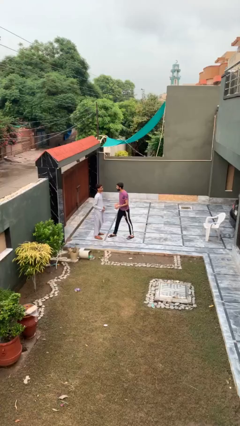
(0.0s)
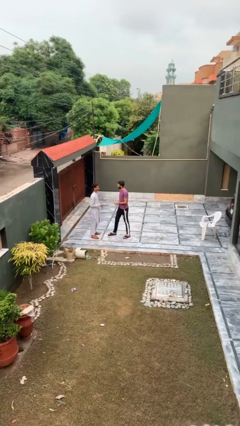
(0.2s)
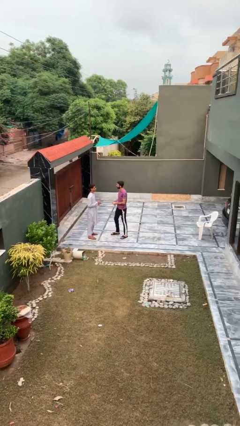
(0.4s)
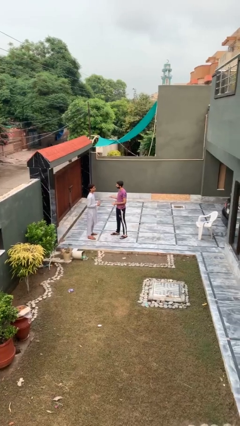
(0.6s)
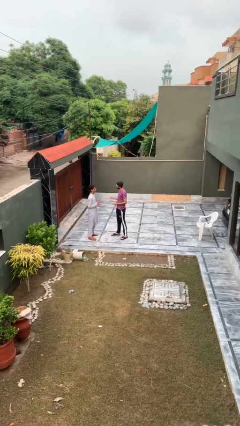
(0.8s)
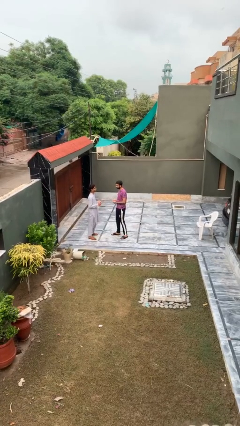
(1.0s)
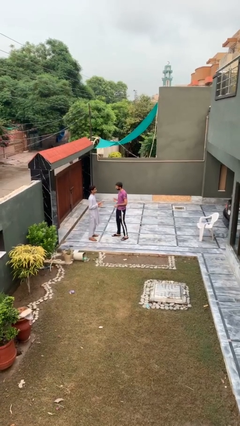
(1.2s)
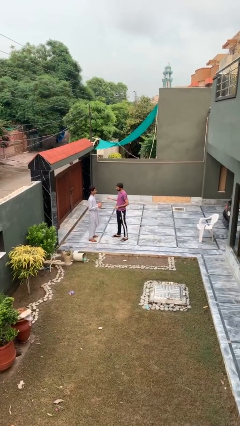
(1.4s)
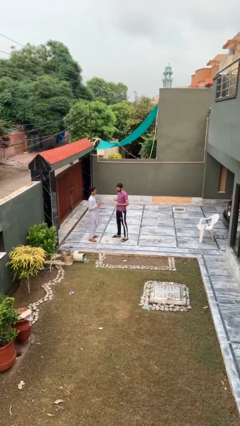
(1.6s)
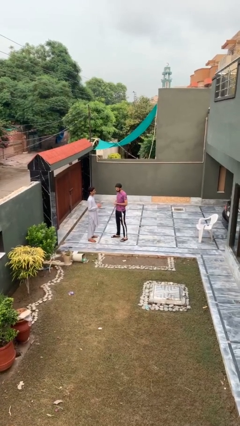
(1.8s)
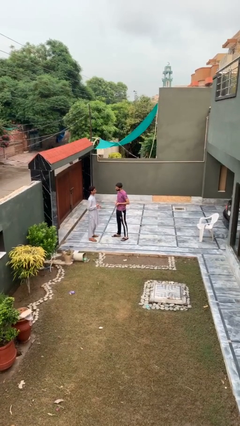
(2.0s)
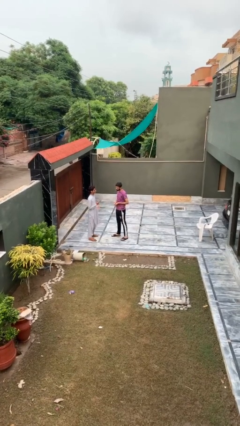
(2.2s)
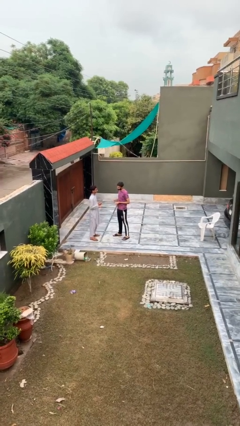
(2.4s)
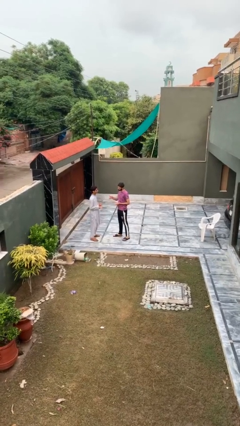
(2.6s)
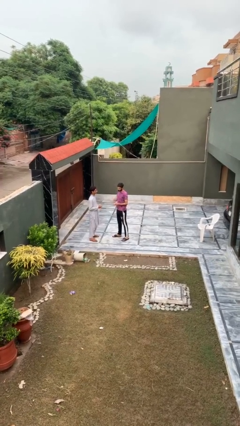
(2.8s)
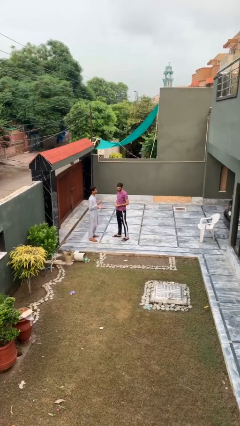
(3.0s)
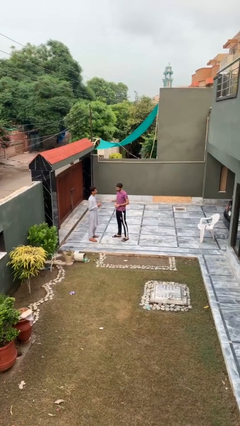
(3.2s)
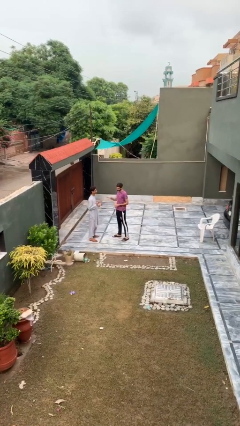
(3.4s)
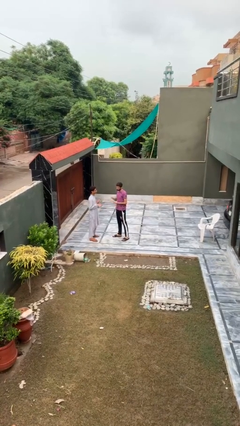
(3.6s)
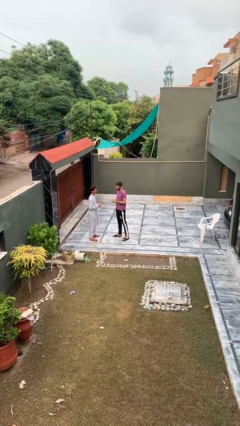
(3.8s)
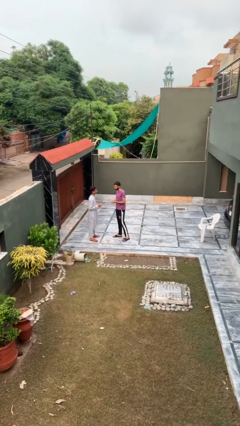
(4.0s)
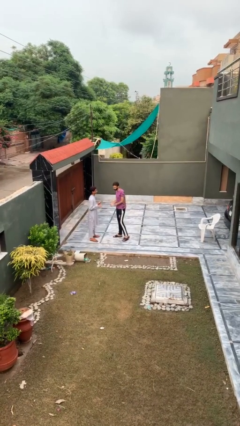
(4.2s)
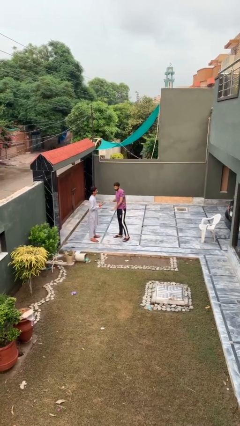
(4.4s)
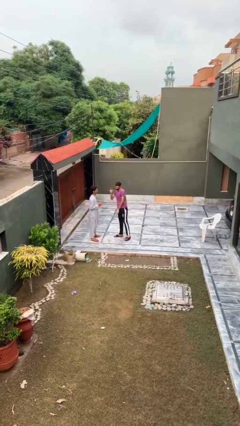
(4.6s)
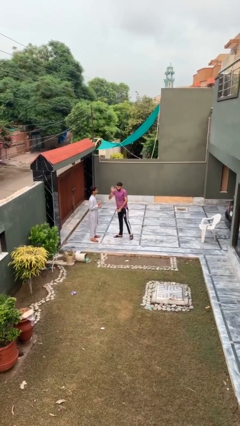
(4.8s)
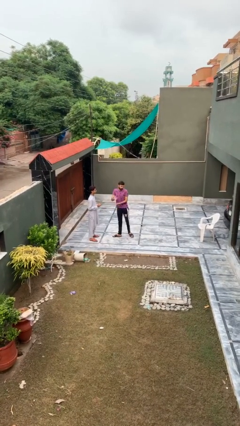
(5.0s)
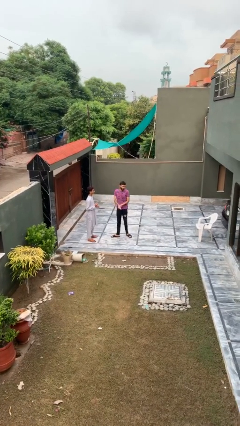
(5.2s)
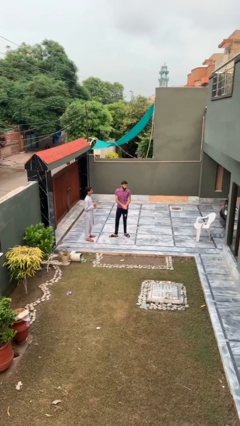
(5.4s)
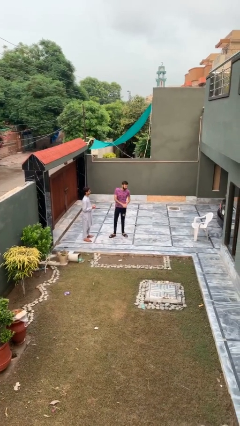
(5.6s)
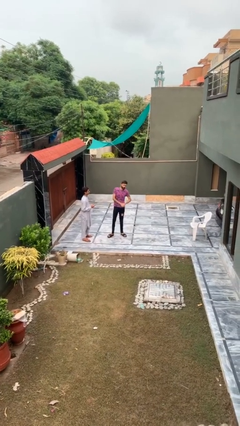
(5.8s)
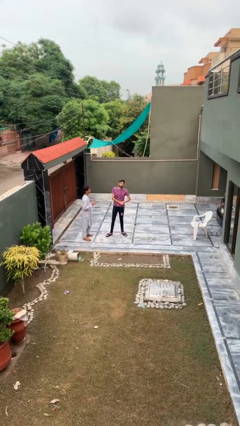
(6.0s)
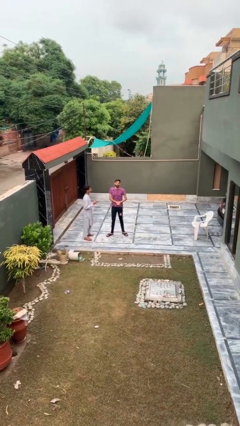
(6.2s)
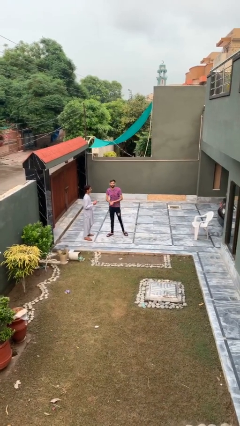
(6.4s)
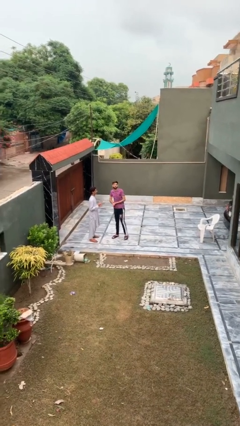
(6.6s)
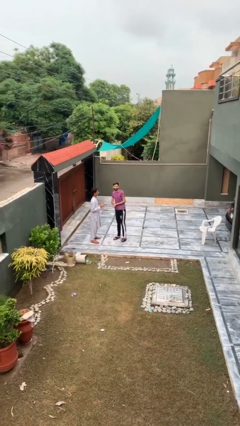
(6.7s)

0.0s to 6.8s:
person talks to person

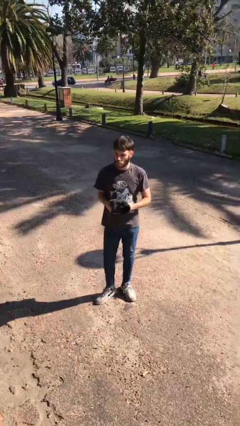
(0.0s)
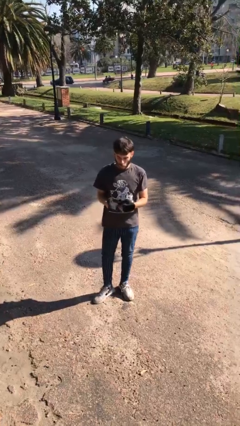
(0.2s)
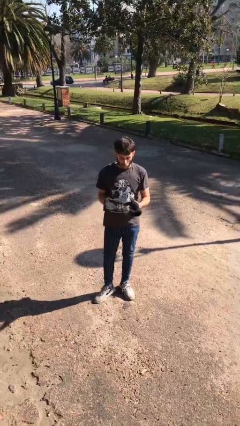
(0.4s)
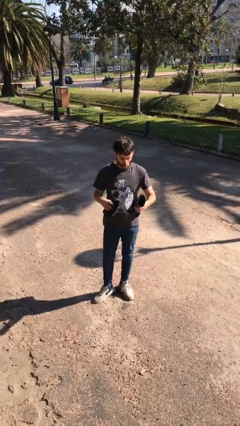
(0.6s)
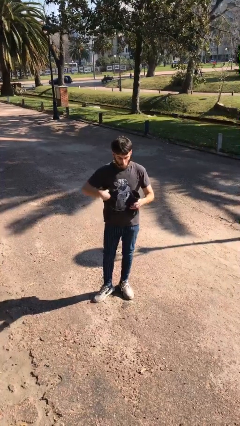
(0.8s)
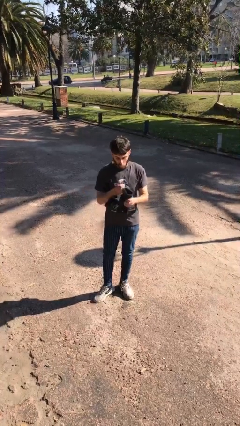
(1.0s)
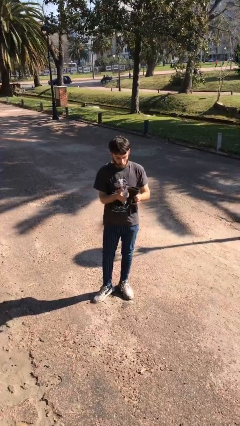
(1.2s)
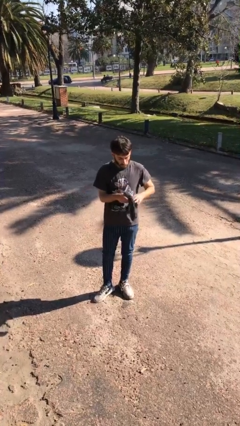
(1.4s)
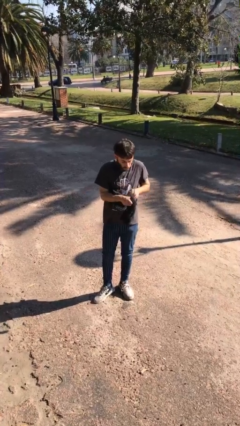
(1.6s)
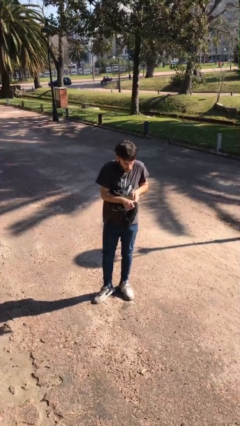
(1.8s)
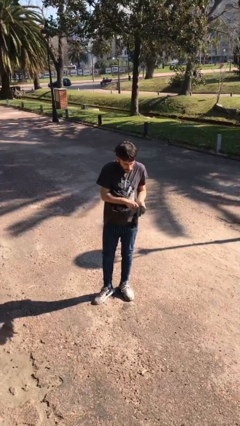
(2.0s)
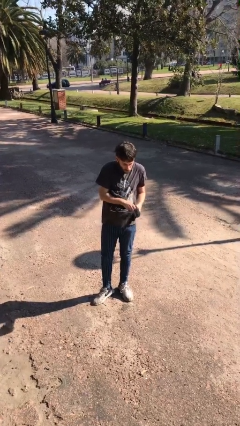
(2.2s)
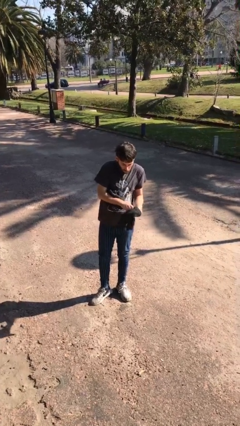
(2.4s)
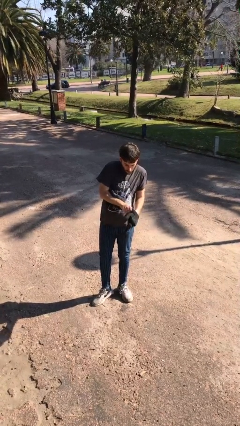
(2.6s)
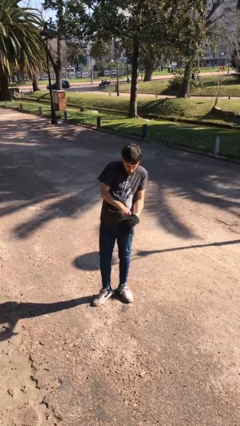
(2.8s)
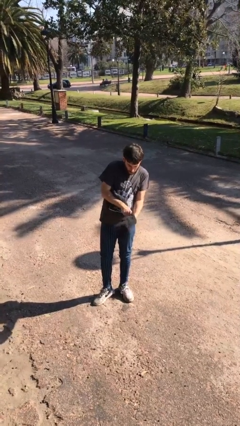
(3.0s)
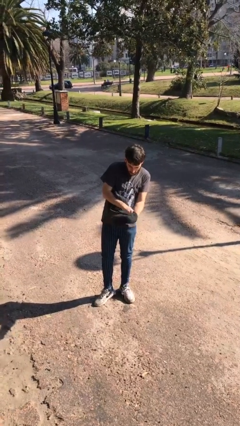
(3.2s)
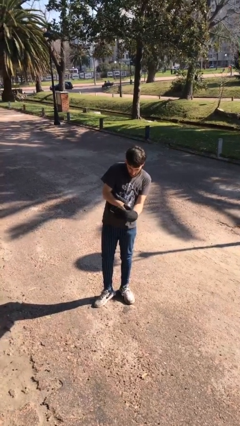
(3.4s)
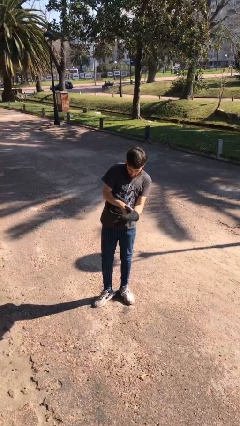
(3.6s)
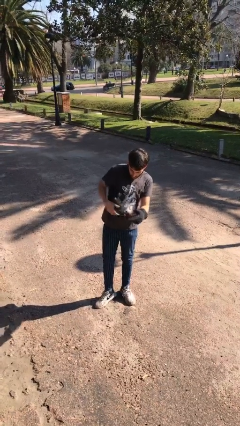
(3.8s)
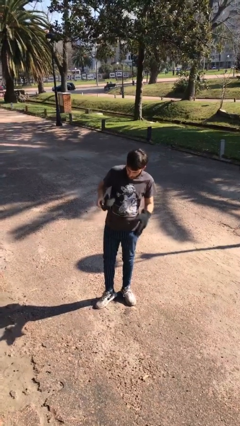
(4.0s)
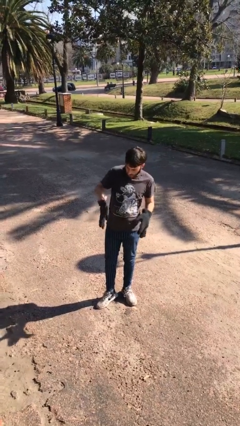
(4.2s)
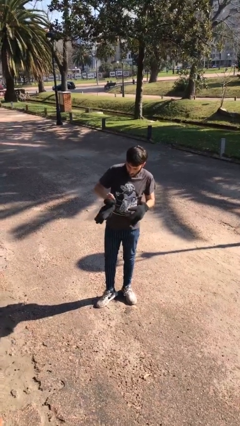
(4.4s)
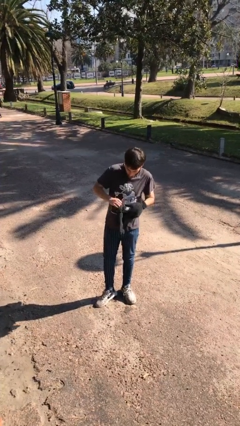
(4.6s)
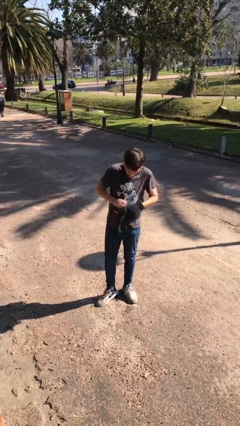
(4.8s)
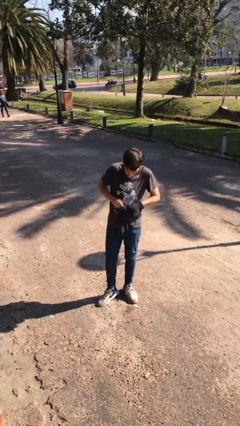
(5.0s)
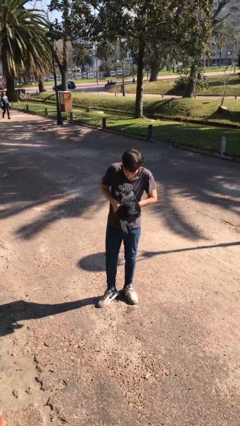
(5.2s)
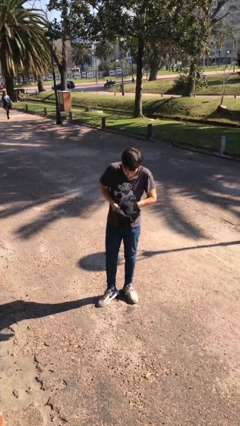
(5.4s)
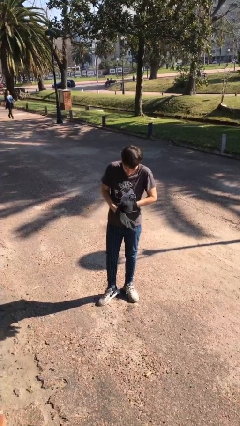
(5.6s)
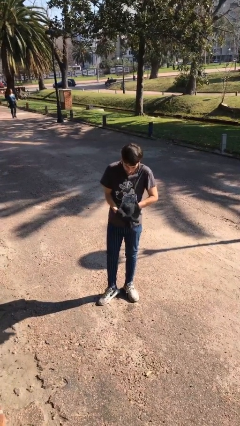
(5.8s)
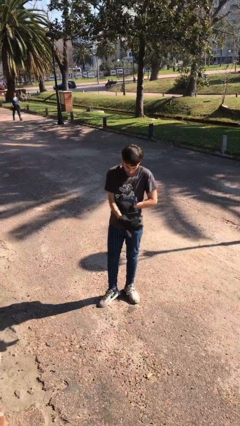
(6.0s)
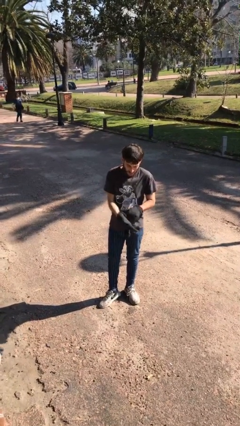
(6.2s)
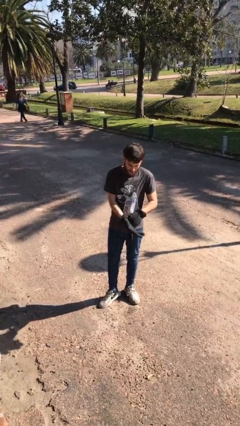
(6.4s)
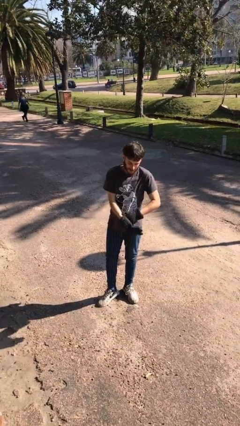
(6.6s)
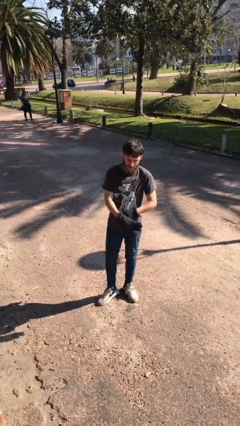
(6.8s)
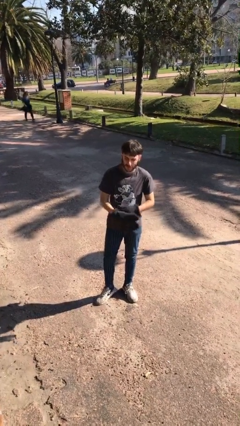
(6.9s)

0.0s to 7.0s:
person puts on gloves

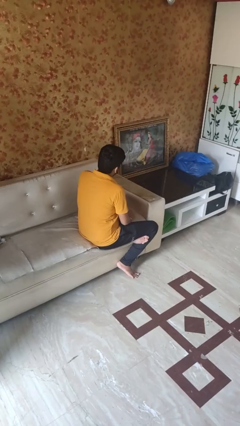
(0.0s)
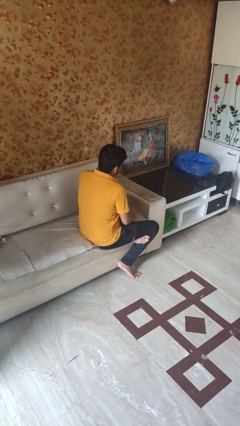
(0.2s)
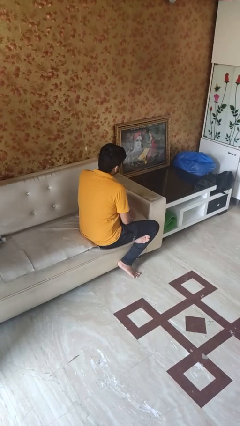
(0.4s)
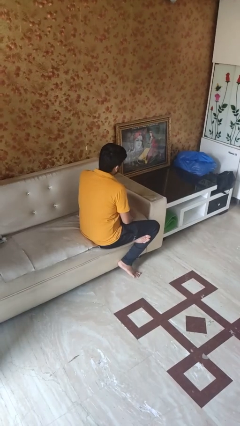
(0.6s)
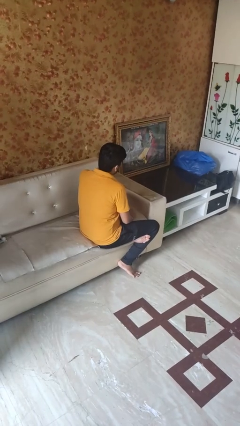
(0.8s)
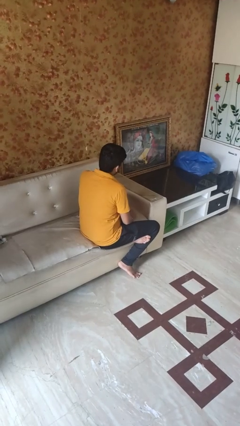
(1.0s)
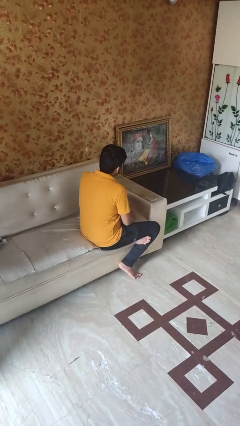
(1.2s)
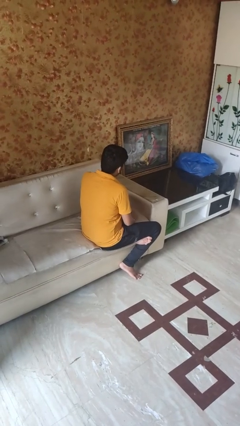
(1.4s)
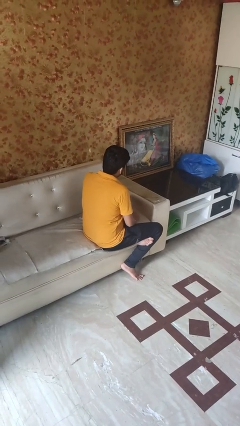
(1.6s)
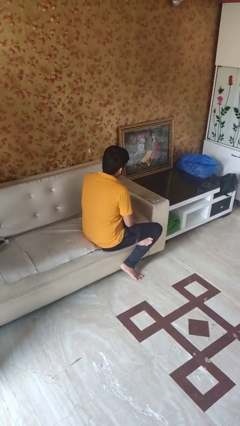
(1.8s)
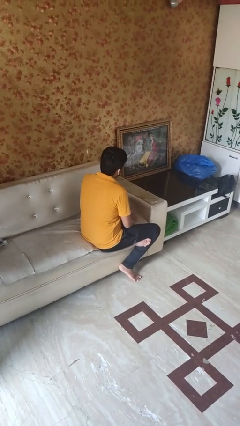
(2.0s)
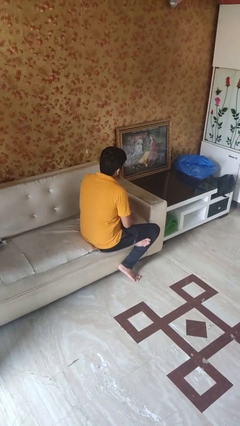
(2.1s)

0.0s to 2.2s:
person rubs eyes

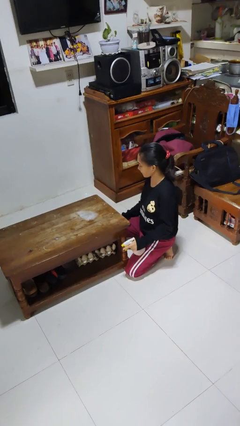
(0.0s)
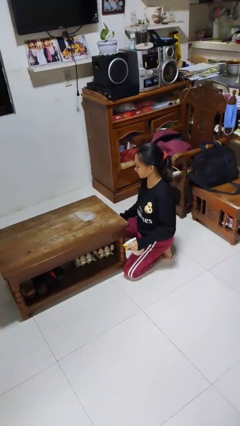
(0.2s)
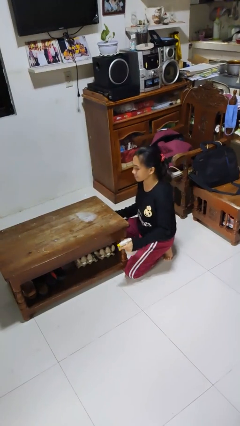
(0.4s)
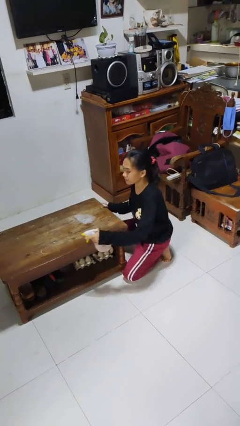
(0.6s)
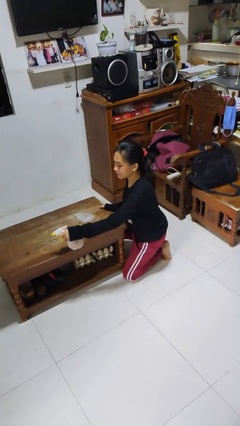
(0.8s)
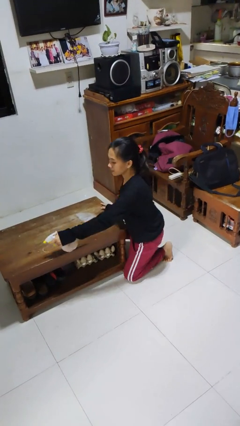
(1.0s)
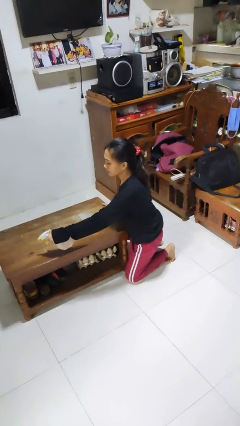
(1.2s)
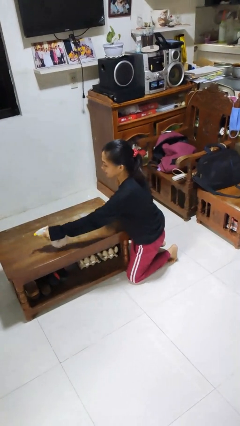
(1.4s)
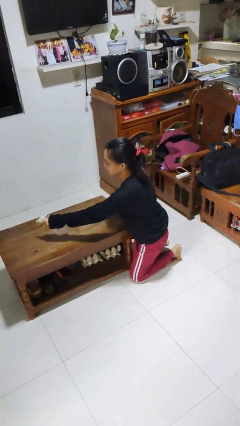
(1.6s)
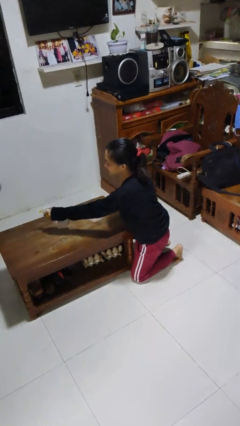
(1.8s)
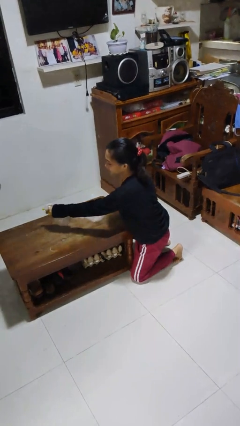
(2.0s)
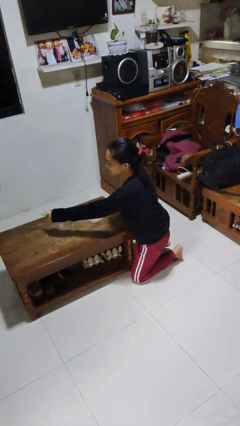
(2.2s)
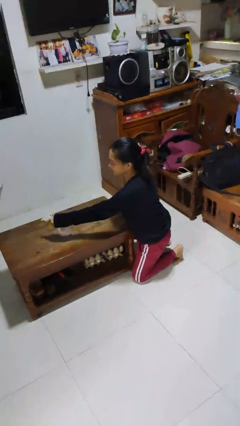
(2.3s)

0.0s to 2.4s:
person sprays from bottle
